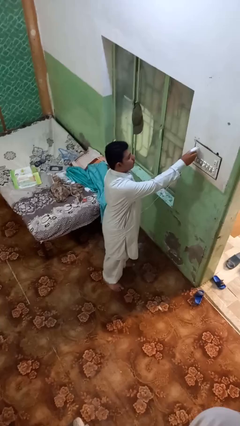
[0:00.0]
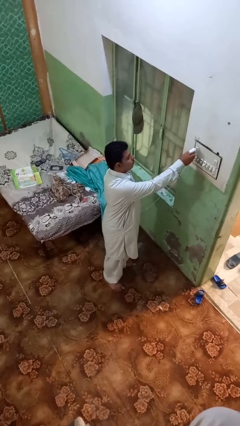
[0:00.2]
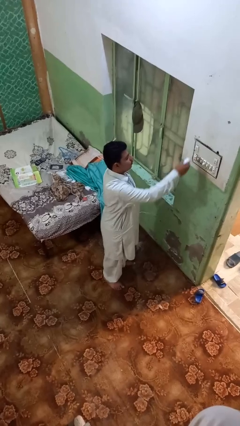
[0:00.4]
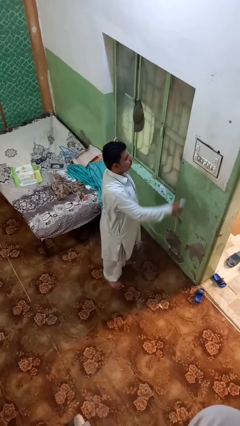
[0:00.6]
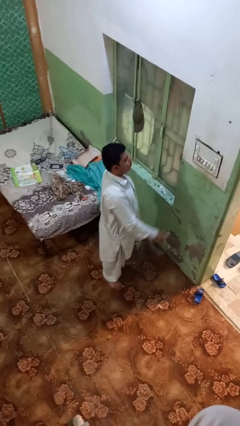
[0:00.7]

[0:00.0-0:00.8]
person unplugs from electrical socket

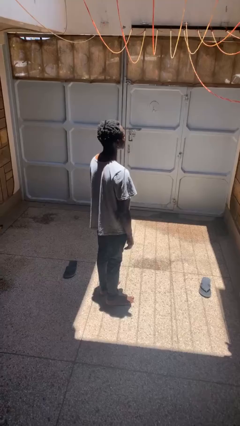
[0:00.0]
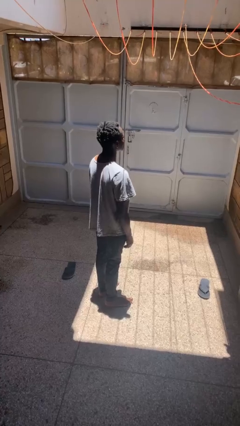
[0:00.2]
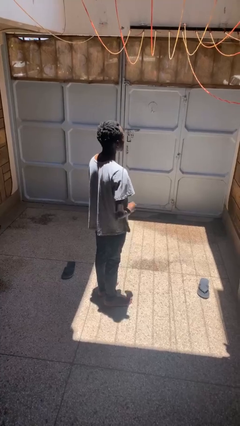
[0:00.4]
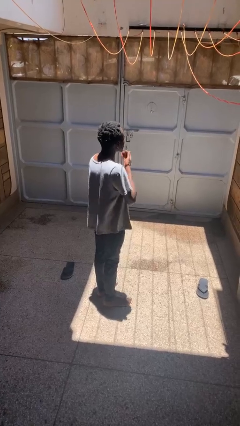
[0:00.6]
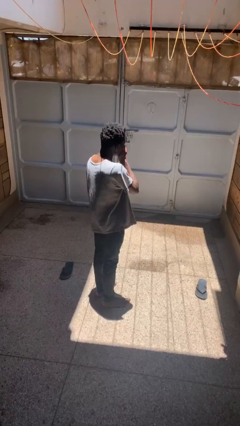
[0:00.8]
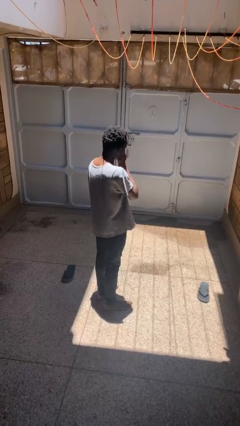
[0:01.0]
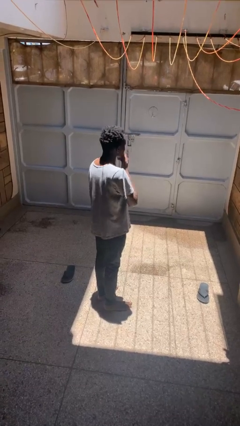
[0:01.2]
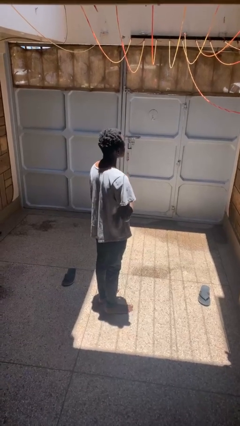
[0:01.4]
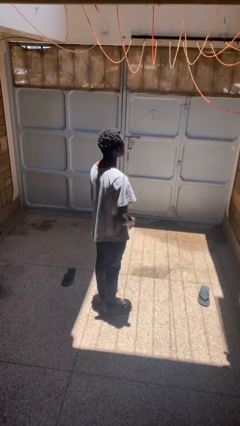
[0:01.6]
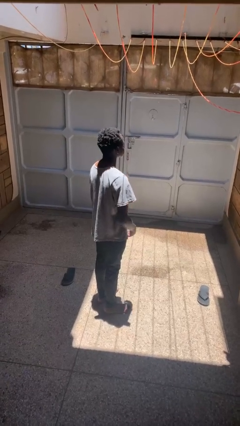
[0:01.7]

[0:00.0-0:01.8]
person sneezes into hand

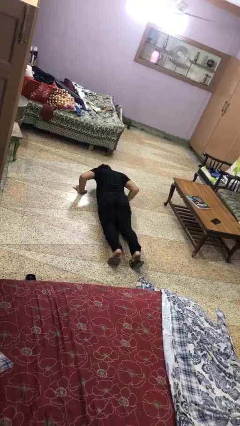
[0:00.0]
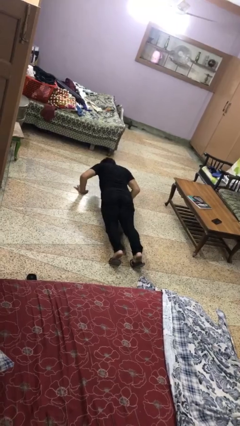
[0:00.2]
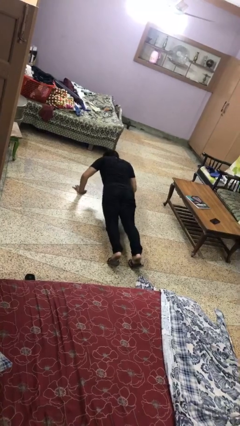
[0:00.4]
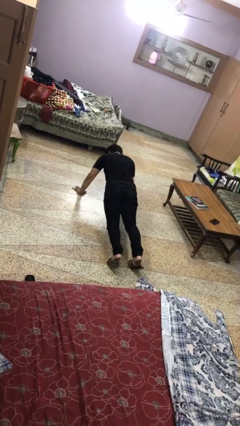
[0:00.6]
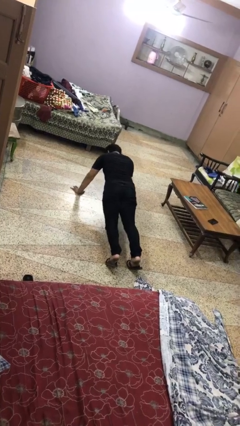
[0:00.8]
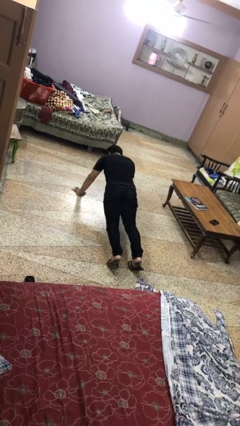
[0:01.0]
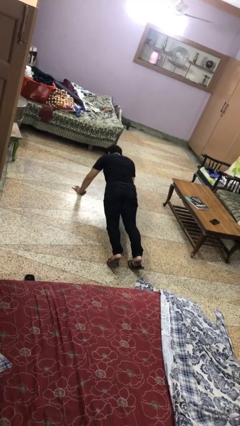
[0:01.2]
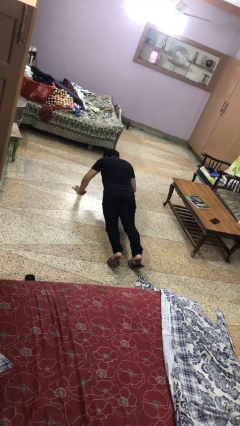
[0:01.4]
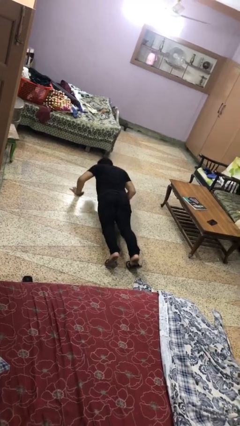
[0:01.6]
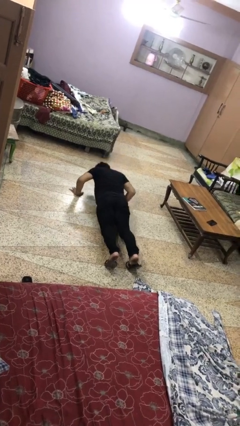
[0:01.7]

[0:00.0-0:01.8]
person exercises with pushup

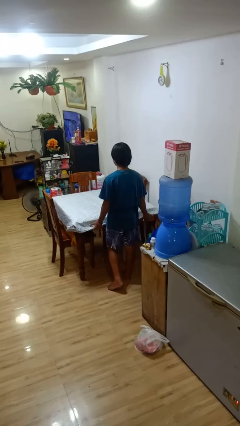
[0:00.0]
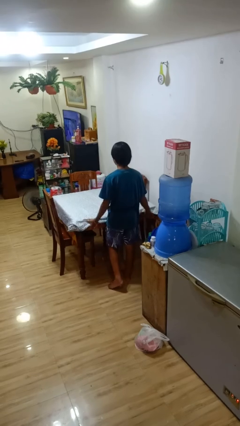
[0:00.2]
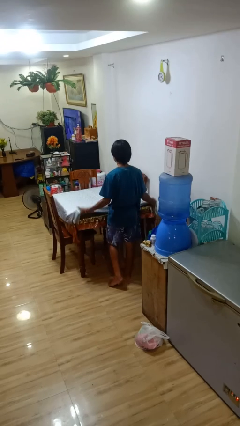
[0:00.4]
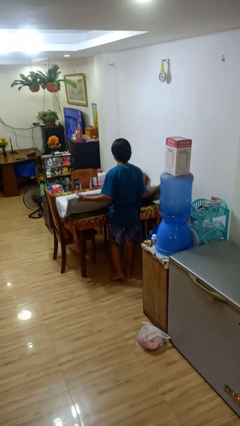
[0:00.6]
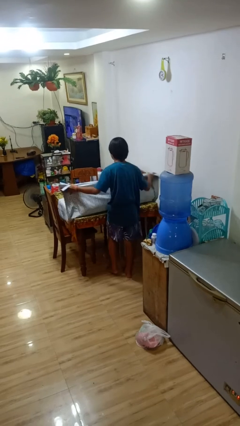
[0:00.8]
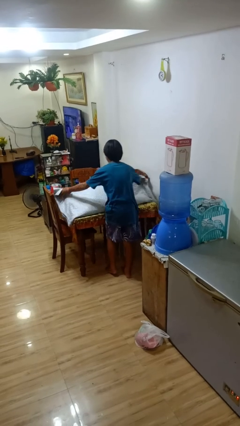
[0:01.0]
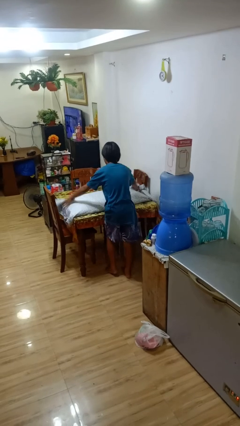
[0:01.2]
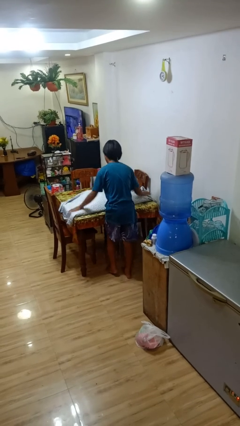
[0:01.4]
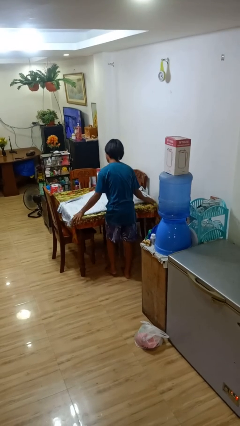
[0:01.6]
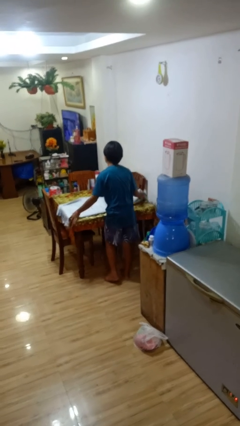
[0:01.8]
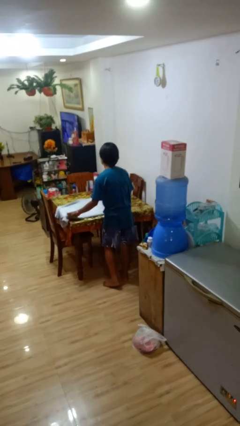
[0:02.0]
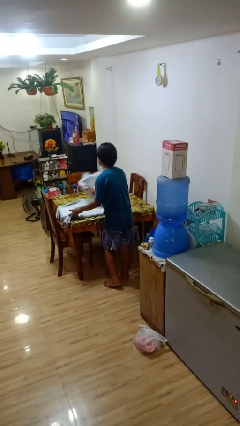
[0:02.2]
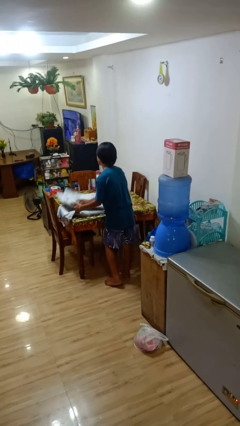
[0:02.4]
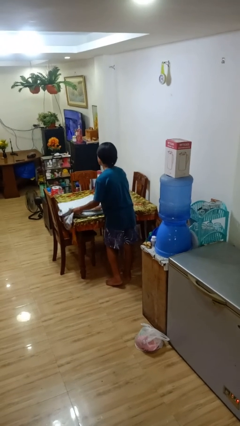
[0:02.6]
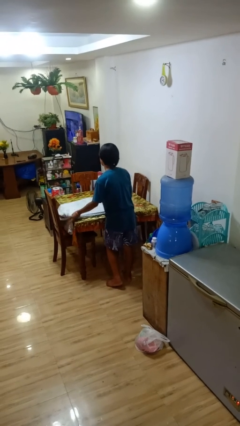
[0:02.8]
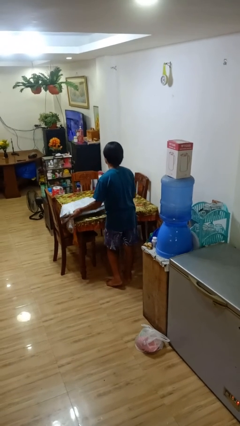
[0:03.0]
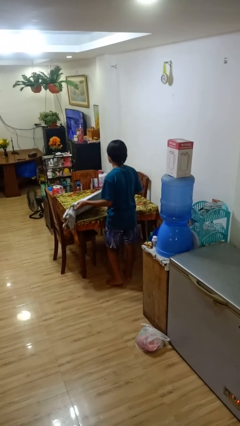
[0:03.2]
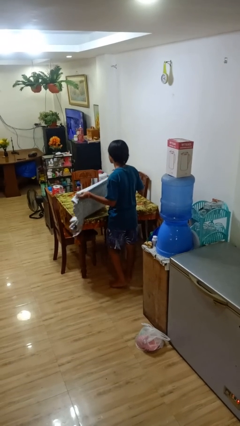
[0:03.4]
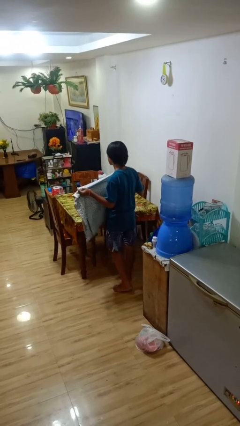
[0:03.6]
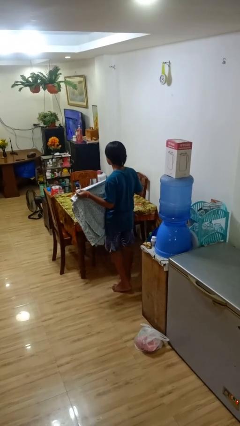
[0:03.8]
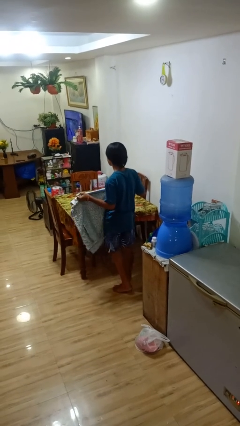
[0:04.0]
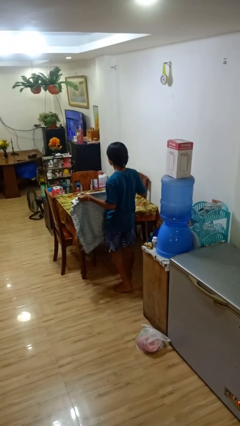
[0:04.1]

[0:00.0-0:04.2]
person folds tablecloth

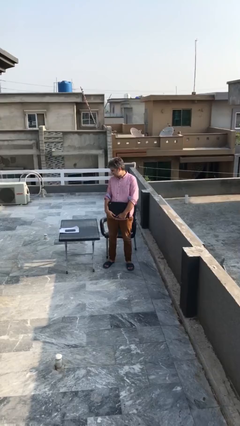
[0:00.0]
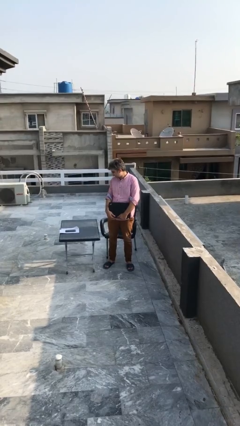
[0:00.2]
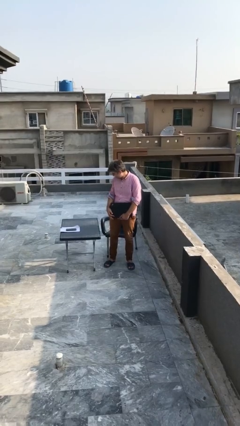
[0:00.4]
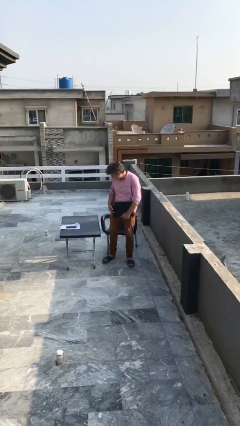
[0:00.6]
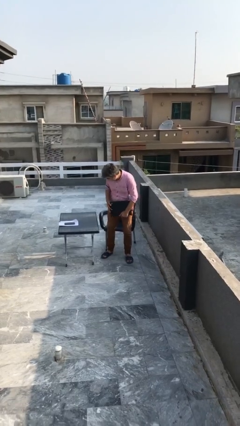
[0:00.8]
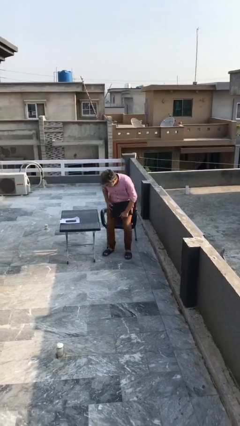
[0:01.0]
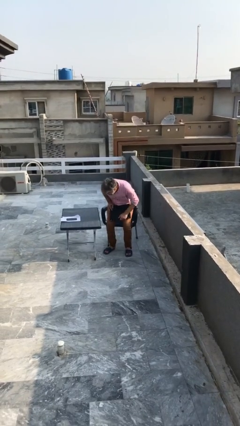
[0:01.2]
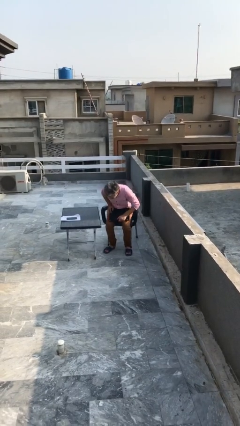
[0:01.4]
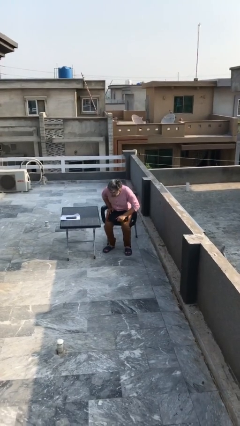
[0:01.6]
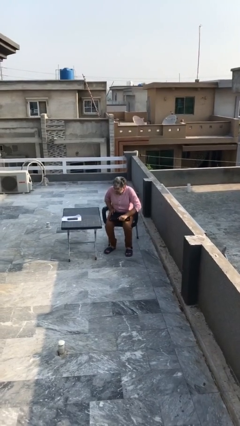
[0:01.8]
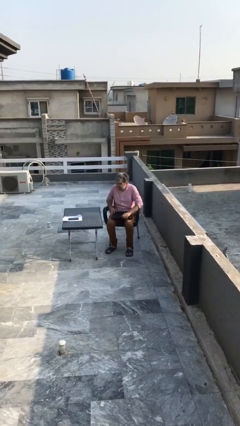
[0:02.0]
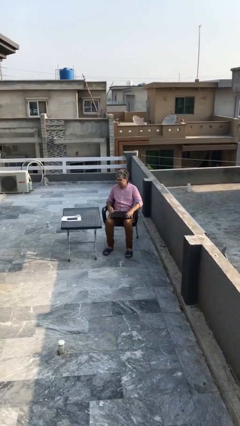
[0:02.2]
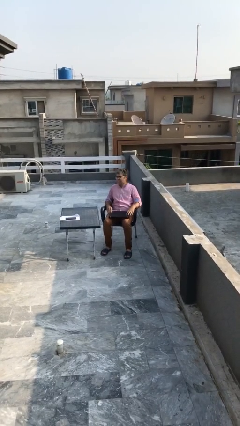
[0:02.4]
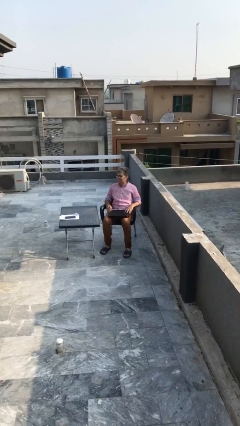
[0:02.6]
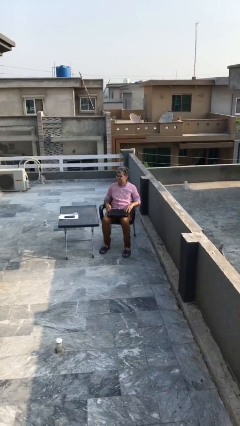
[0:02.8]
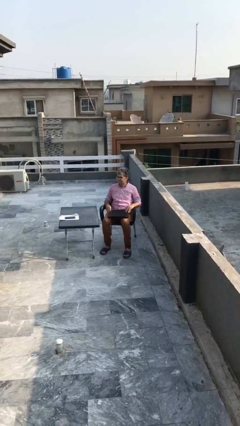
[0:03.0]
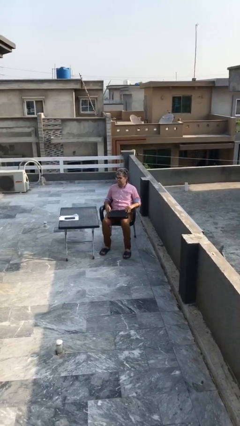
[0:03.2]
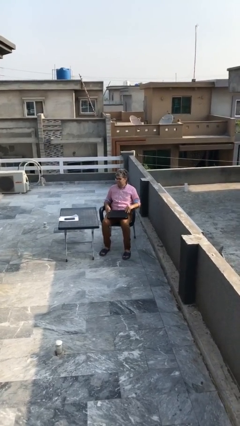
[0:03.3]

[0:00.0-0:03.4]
person sits down

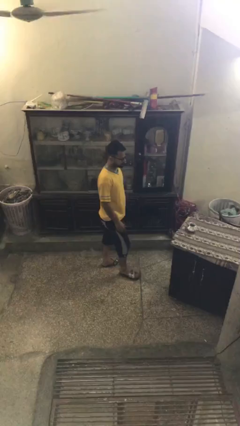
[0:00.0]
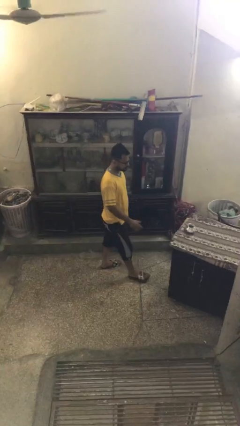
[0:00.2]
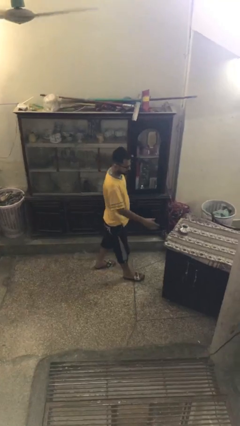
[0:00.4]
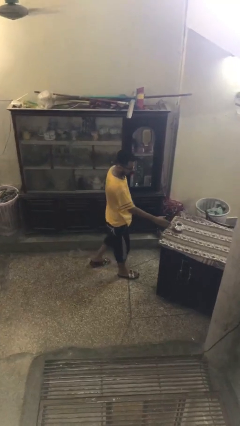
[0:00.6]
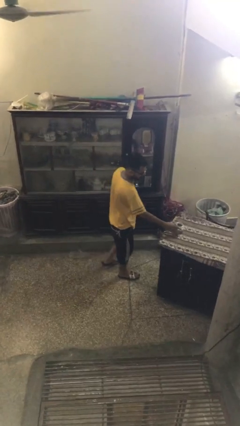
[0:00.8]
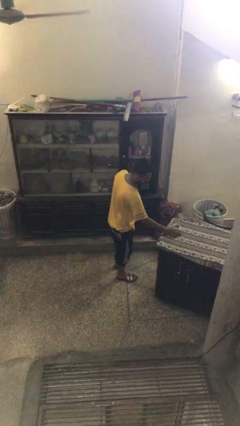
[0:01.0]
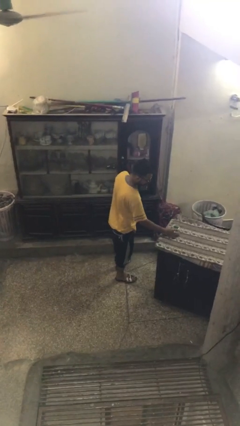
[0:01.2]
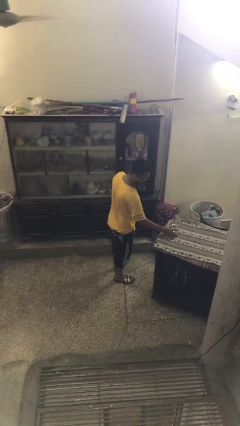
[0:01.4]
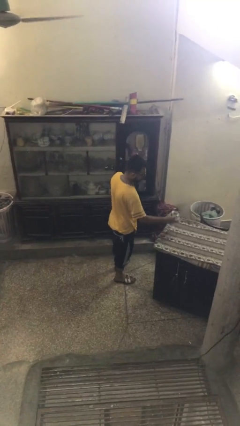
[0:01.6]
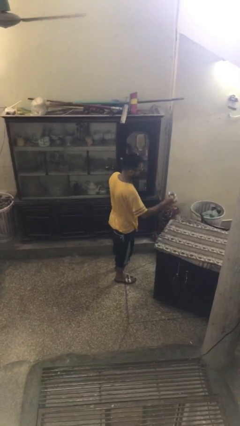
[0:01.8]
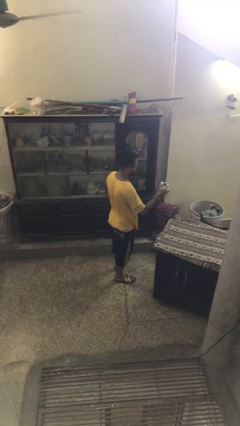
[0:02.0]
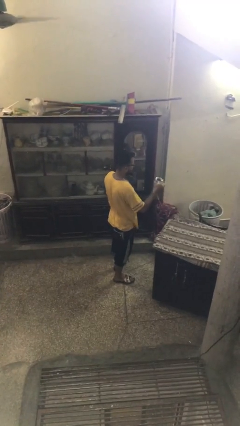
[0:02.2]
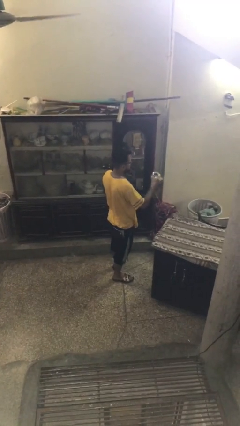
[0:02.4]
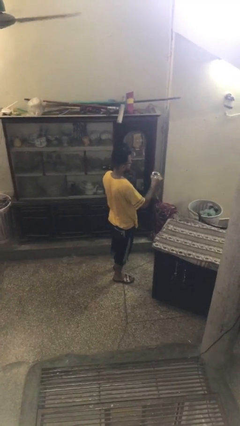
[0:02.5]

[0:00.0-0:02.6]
person picks up object from table

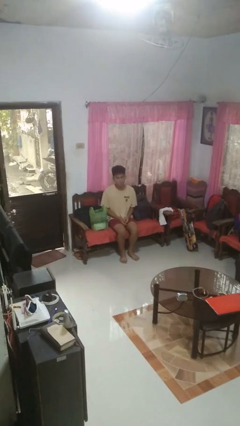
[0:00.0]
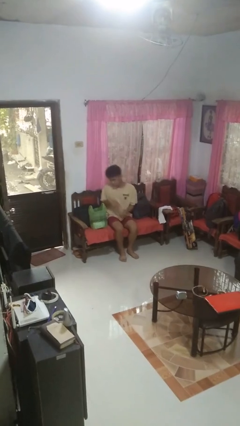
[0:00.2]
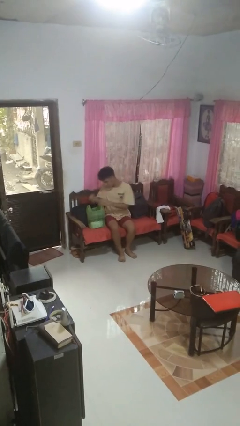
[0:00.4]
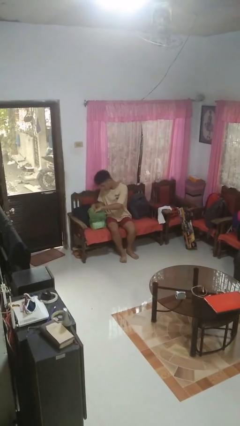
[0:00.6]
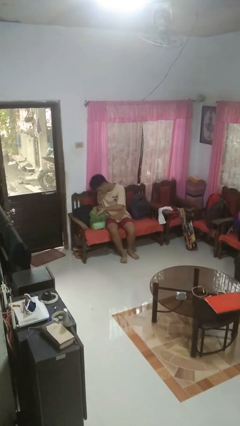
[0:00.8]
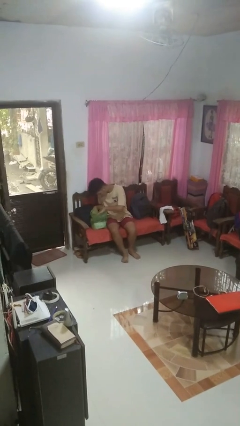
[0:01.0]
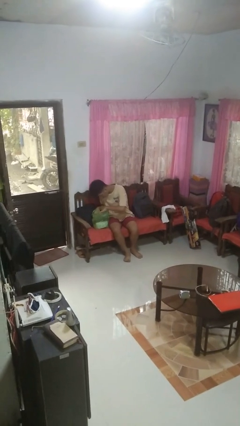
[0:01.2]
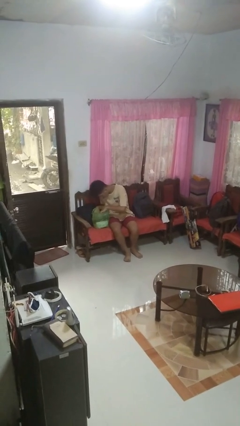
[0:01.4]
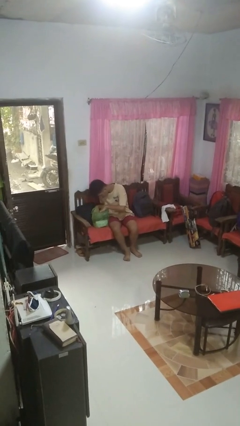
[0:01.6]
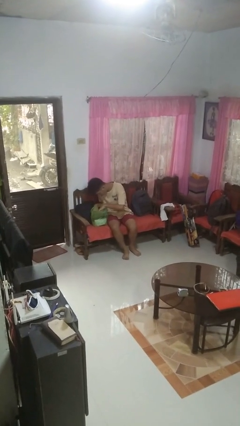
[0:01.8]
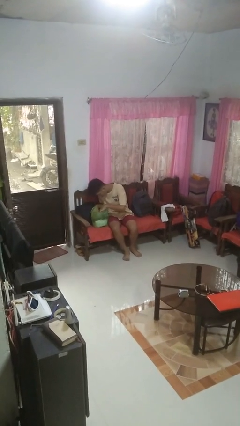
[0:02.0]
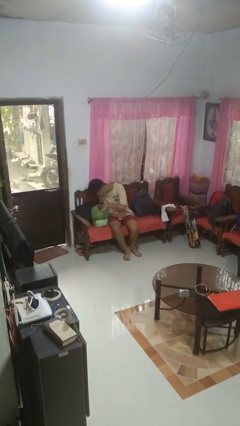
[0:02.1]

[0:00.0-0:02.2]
person searches in bag
